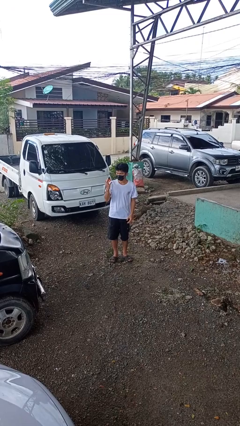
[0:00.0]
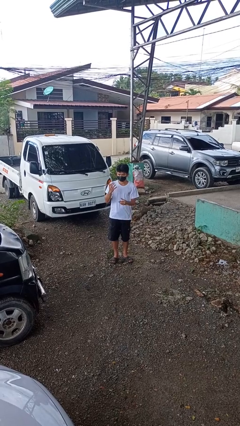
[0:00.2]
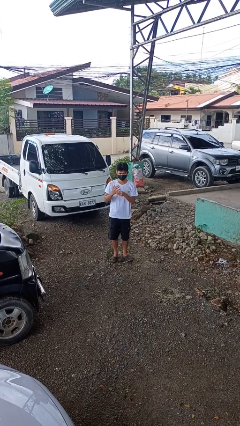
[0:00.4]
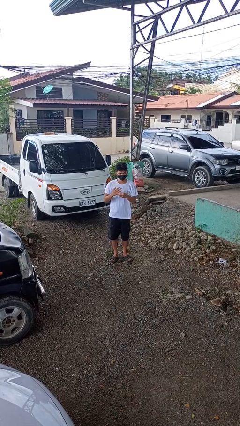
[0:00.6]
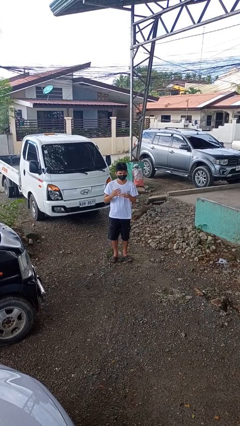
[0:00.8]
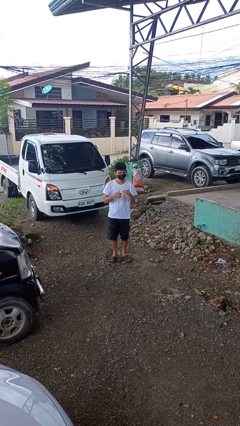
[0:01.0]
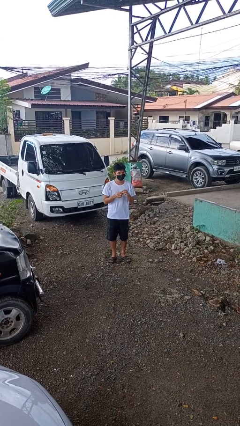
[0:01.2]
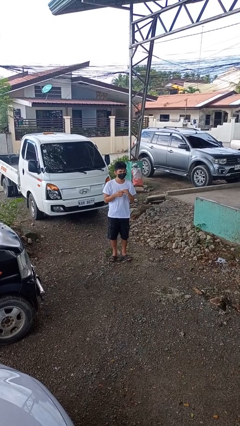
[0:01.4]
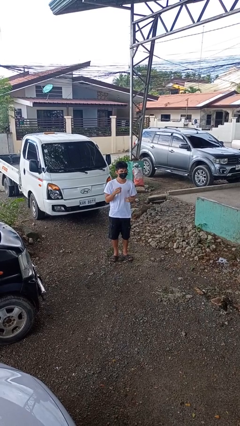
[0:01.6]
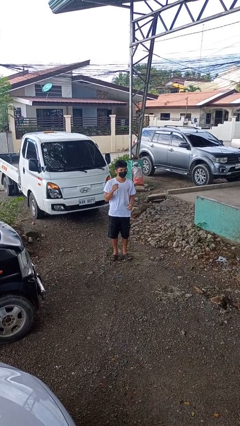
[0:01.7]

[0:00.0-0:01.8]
person takes off ring

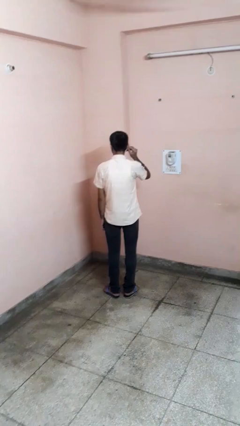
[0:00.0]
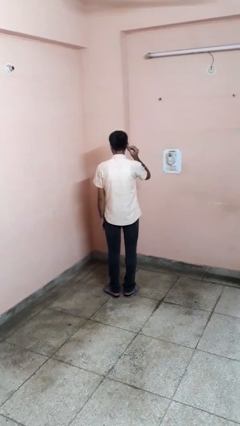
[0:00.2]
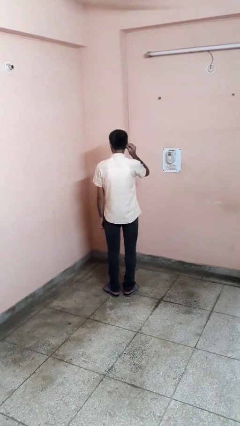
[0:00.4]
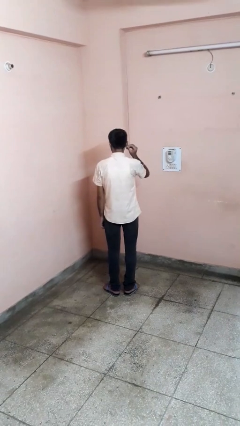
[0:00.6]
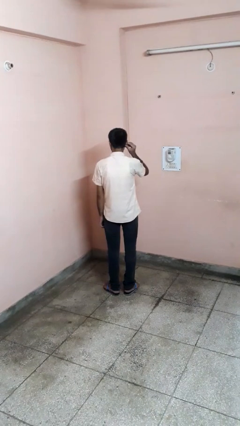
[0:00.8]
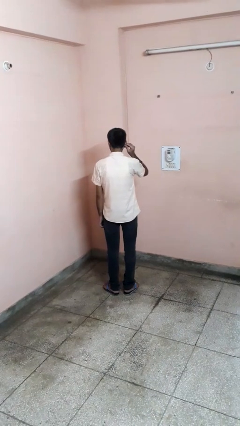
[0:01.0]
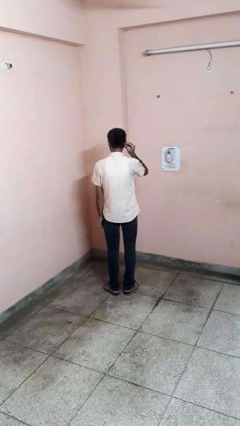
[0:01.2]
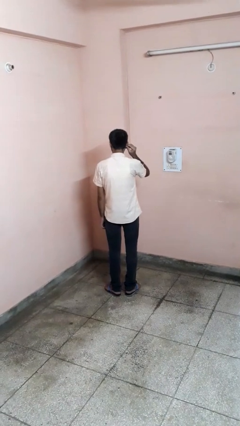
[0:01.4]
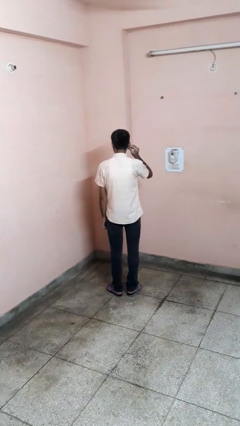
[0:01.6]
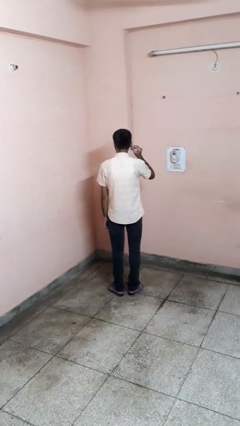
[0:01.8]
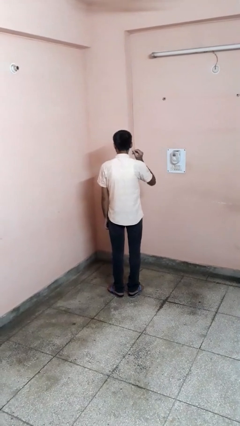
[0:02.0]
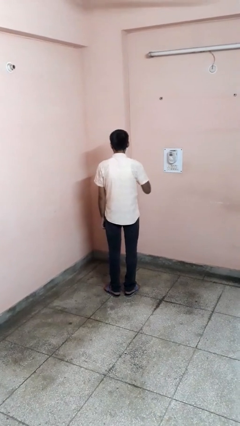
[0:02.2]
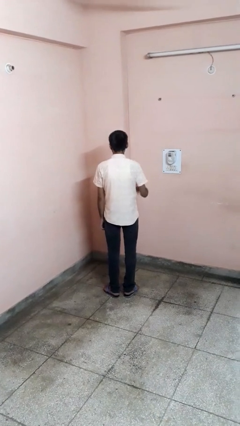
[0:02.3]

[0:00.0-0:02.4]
person touches earlobe

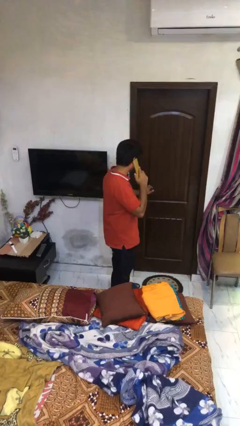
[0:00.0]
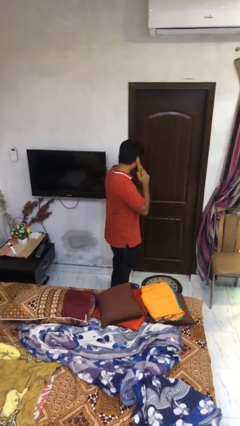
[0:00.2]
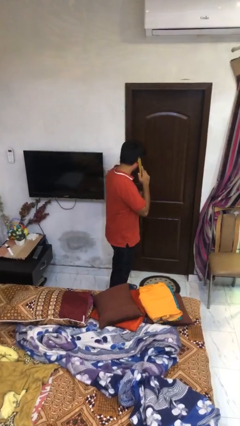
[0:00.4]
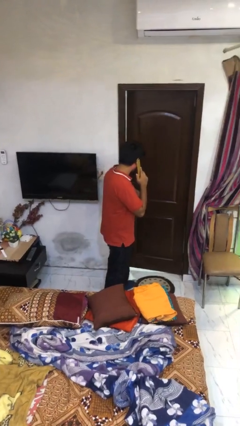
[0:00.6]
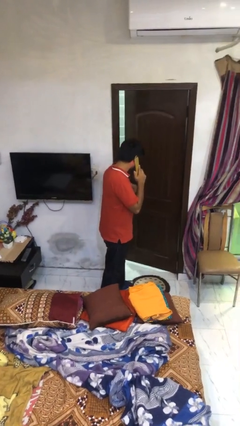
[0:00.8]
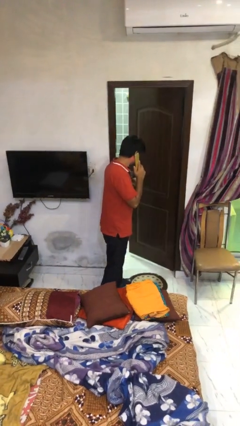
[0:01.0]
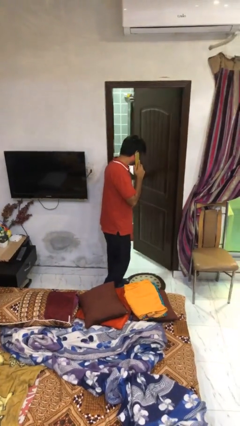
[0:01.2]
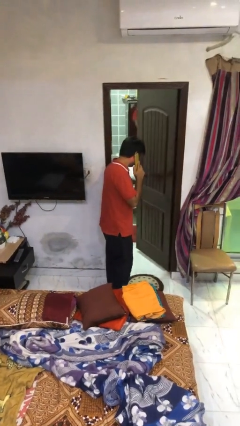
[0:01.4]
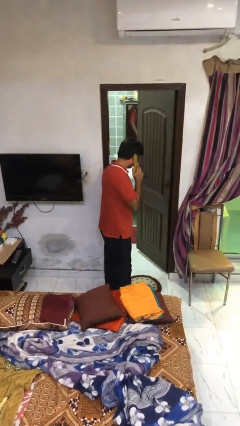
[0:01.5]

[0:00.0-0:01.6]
person opens facility door

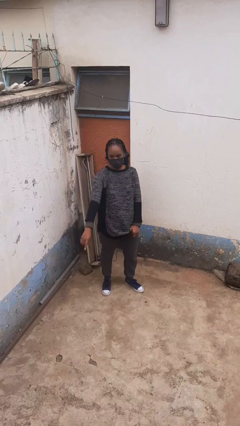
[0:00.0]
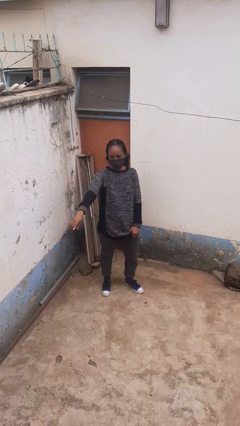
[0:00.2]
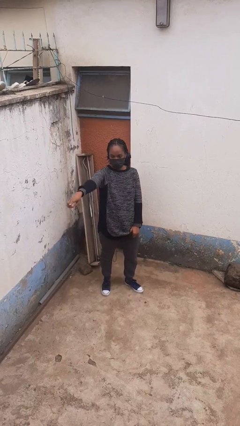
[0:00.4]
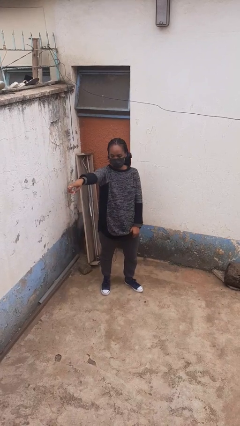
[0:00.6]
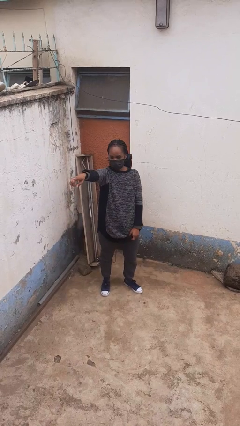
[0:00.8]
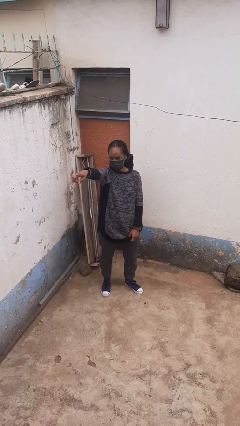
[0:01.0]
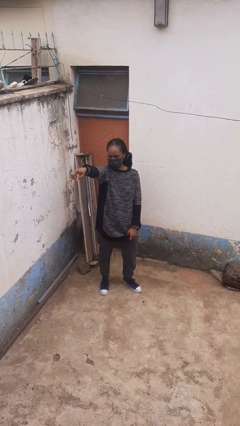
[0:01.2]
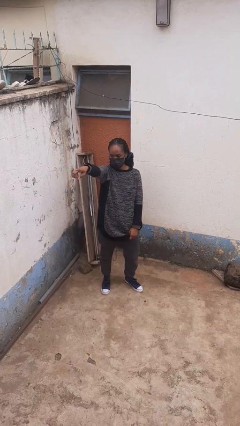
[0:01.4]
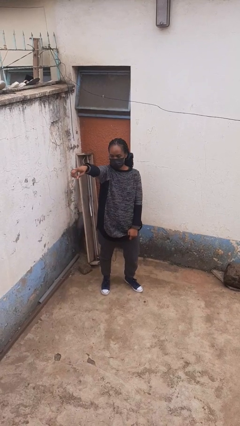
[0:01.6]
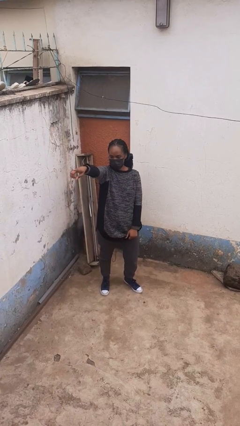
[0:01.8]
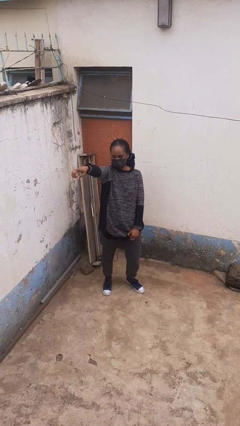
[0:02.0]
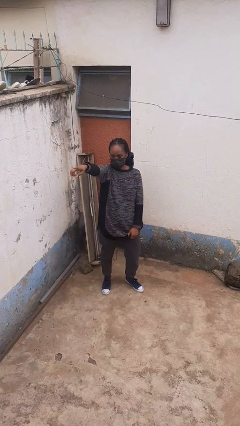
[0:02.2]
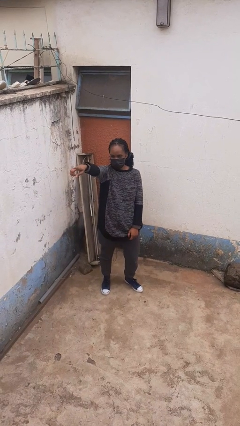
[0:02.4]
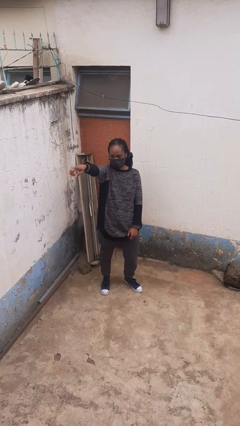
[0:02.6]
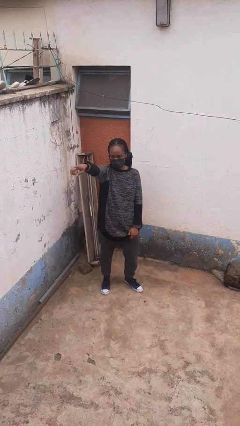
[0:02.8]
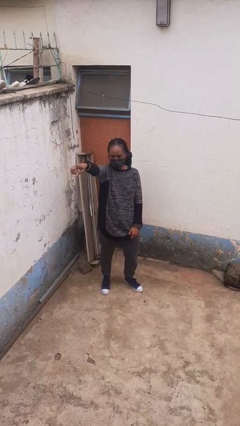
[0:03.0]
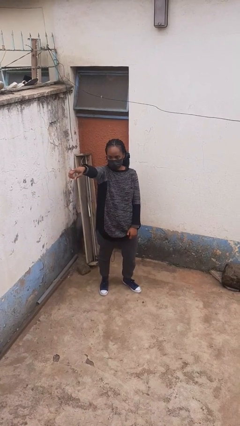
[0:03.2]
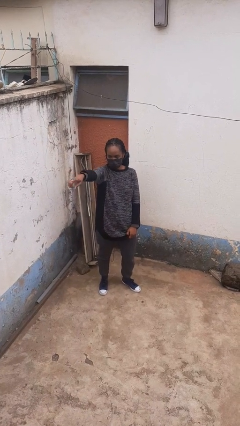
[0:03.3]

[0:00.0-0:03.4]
person points at person

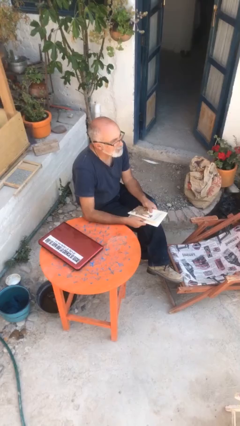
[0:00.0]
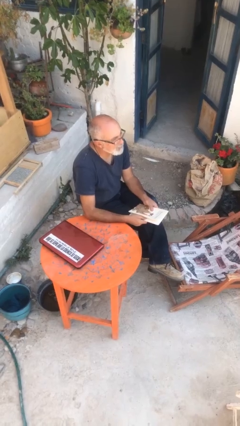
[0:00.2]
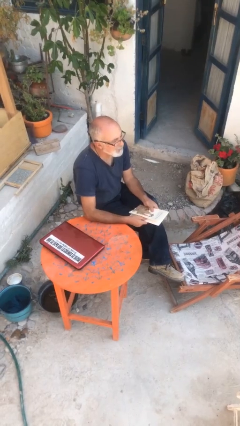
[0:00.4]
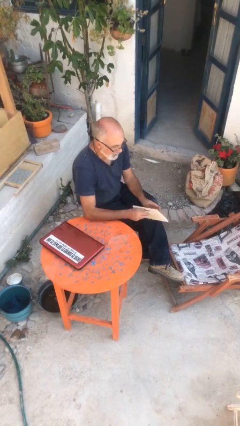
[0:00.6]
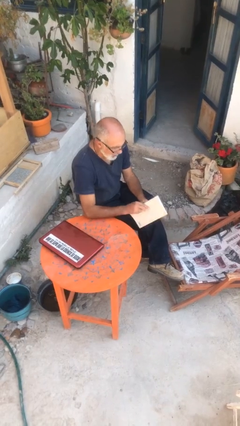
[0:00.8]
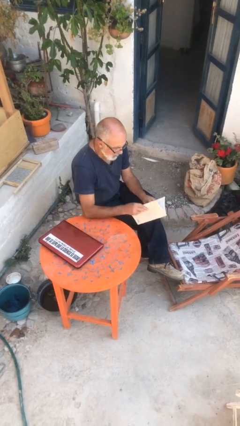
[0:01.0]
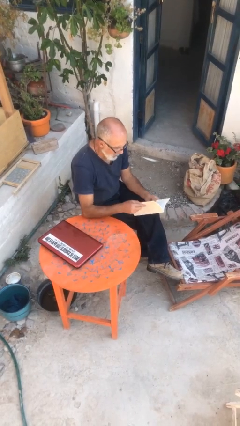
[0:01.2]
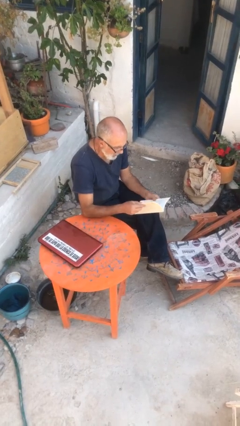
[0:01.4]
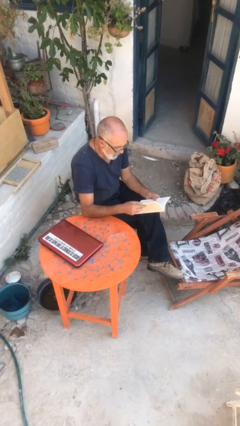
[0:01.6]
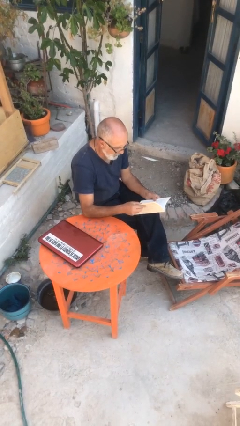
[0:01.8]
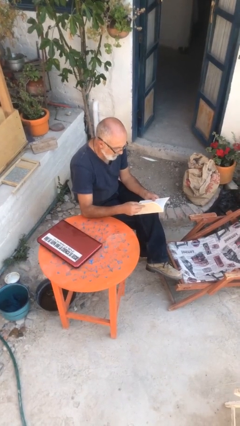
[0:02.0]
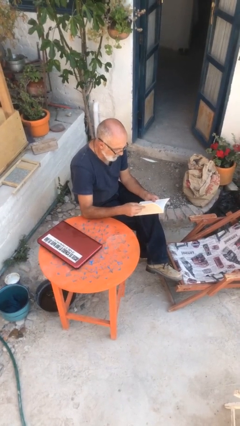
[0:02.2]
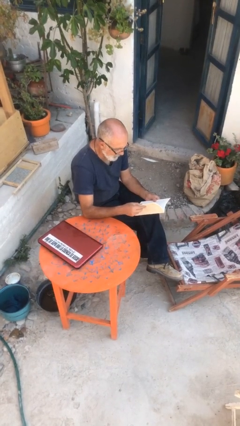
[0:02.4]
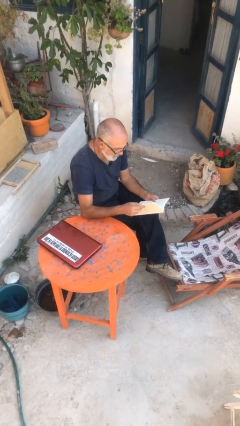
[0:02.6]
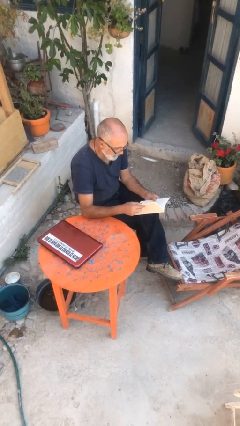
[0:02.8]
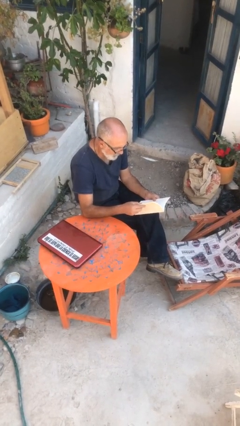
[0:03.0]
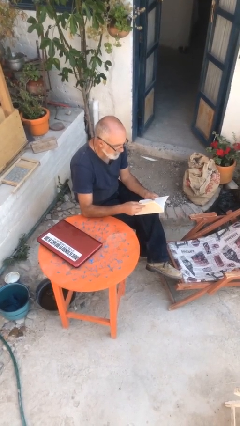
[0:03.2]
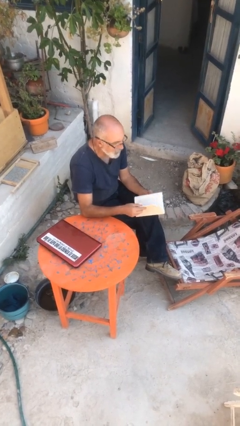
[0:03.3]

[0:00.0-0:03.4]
person reads document

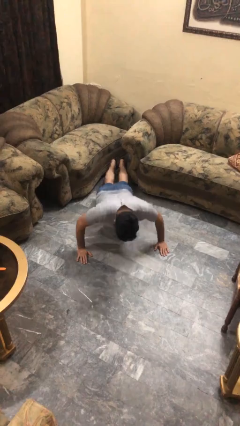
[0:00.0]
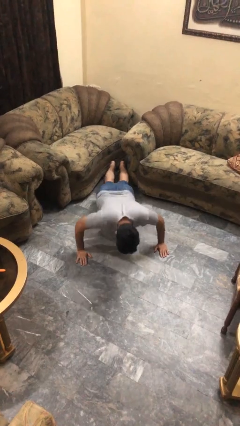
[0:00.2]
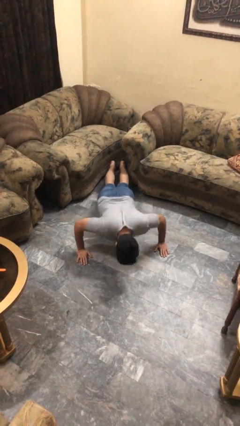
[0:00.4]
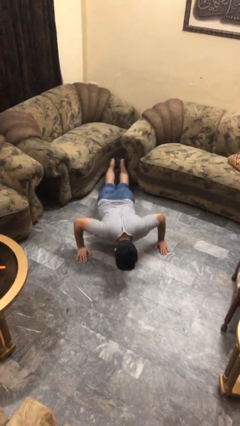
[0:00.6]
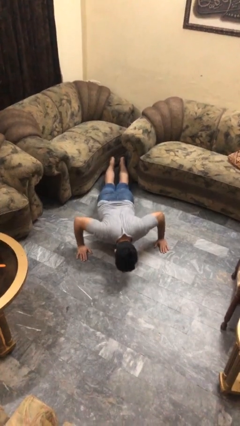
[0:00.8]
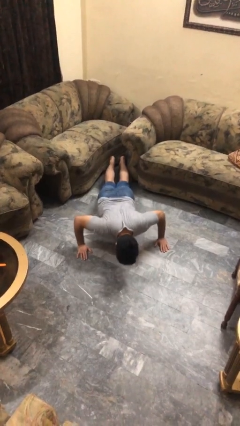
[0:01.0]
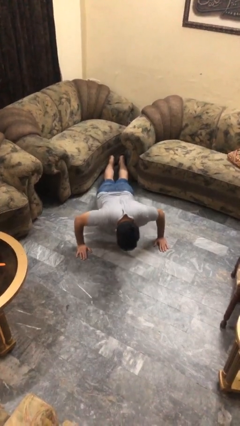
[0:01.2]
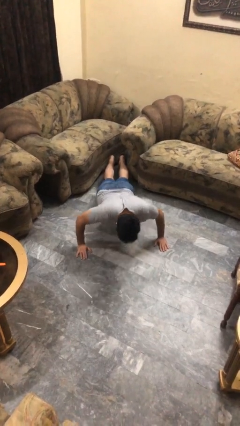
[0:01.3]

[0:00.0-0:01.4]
person exercises with pushup

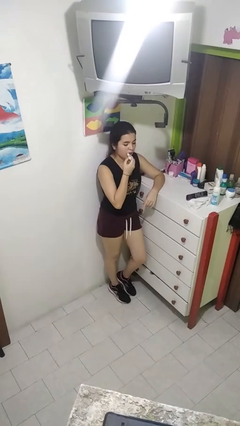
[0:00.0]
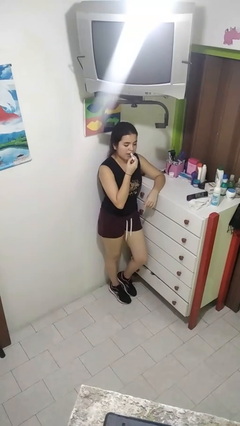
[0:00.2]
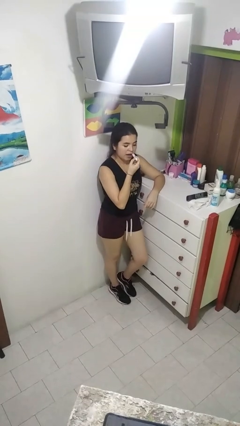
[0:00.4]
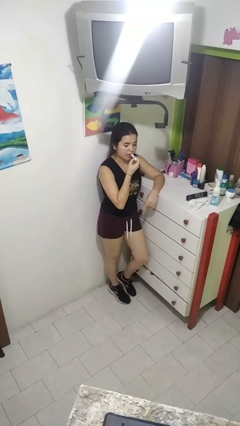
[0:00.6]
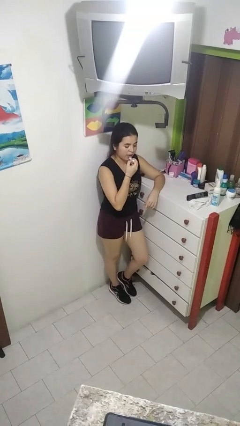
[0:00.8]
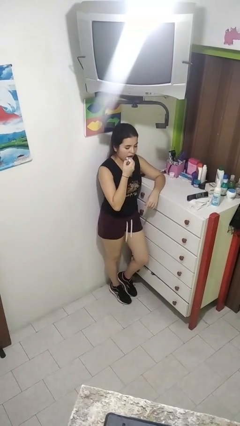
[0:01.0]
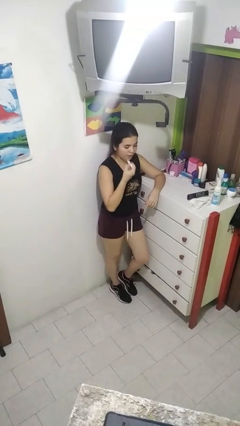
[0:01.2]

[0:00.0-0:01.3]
person applies lip makeup

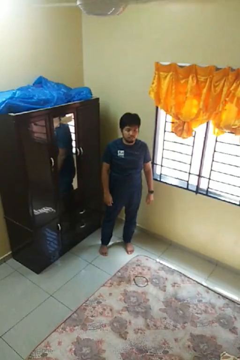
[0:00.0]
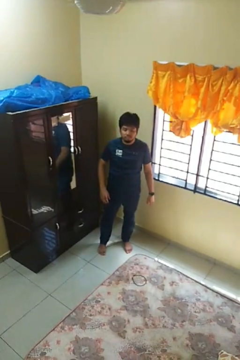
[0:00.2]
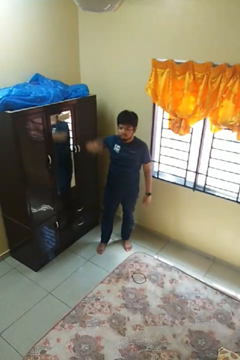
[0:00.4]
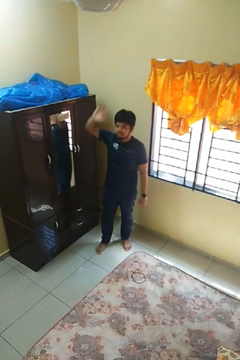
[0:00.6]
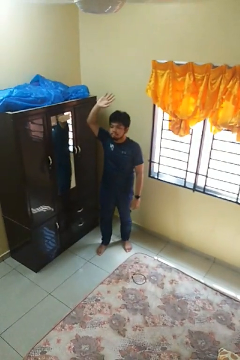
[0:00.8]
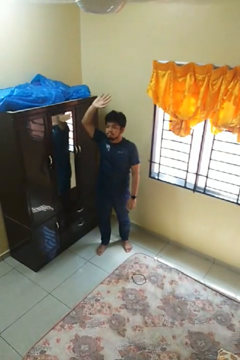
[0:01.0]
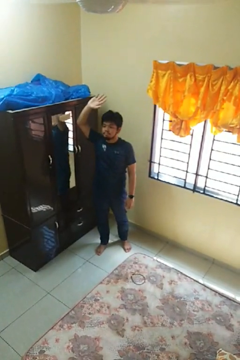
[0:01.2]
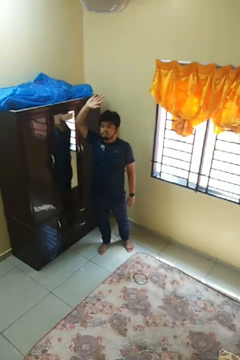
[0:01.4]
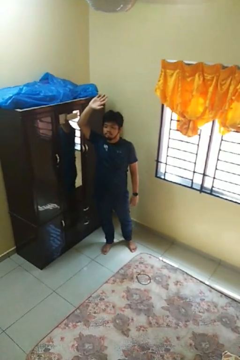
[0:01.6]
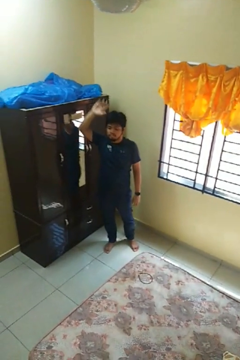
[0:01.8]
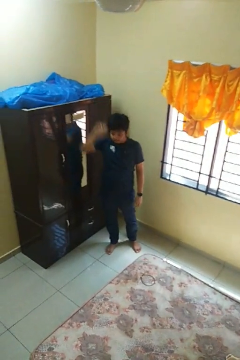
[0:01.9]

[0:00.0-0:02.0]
person gestures raise hand
